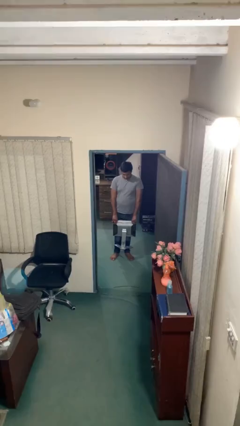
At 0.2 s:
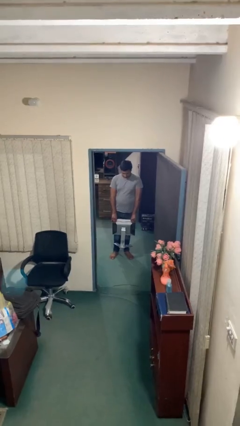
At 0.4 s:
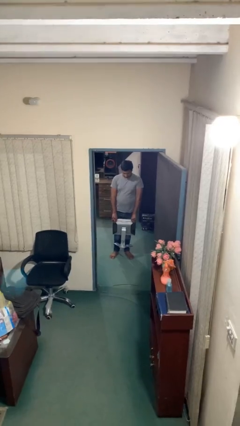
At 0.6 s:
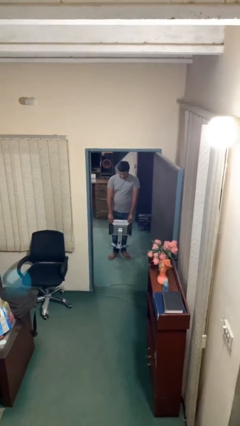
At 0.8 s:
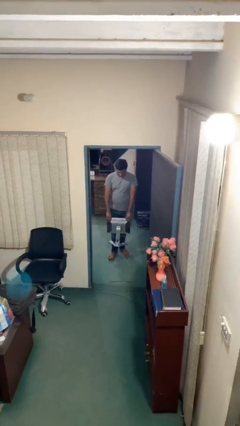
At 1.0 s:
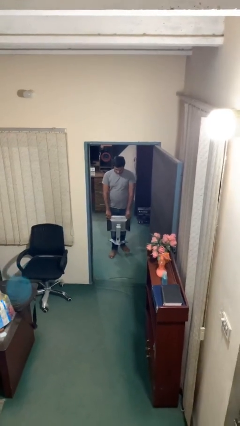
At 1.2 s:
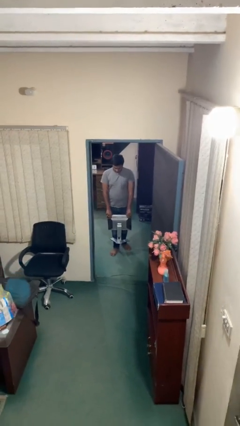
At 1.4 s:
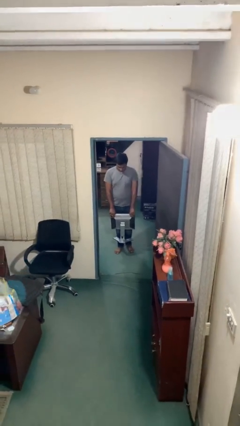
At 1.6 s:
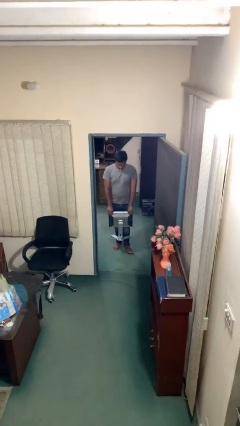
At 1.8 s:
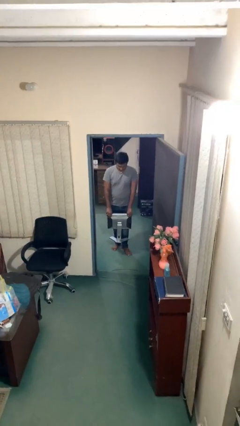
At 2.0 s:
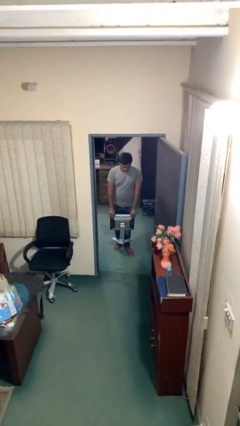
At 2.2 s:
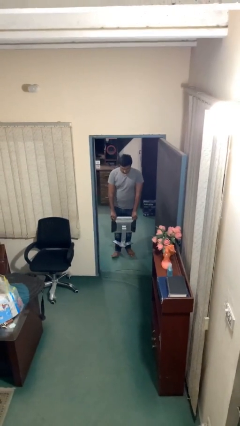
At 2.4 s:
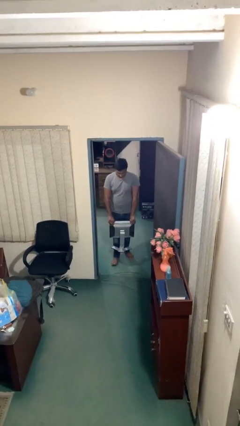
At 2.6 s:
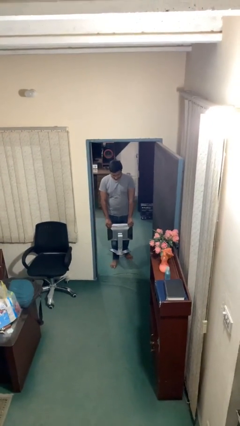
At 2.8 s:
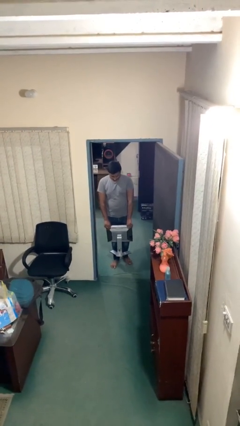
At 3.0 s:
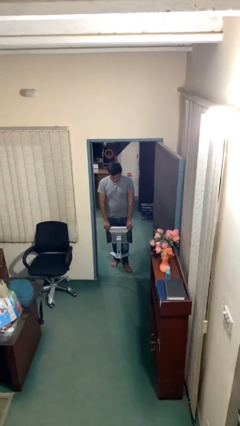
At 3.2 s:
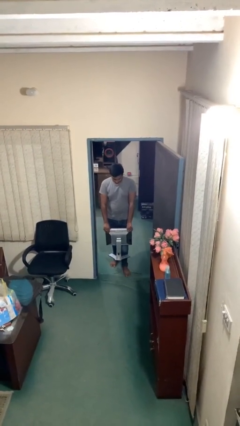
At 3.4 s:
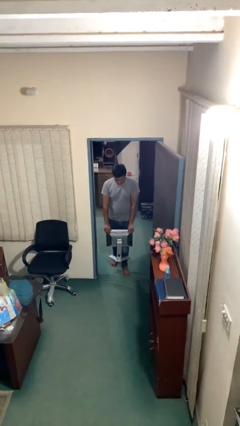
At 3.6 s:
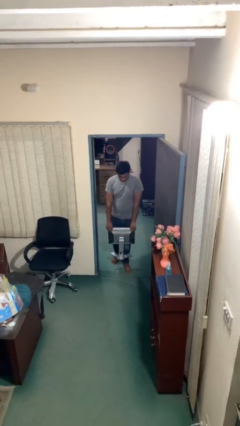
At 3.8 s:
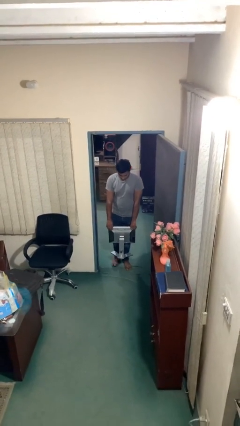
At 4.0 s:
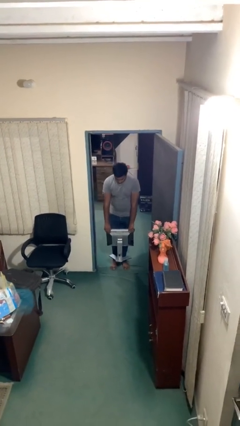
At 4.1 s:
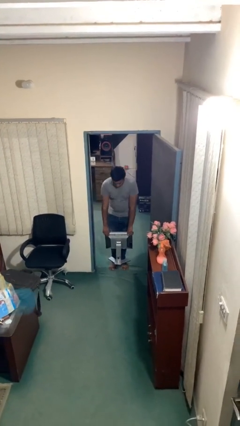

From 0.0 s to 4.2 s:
person carries heavy object

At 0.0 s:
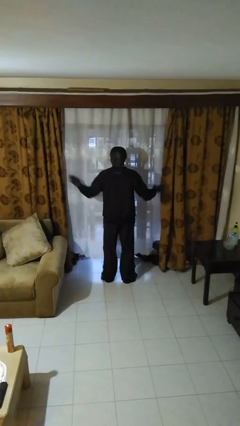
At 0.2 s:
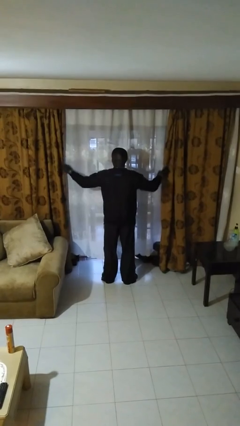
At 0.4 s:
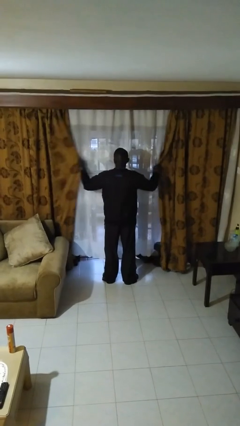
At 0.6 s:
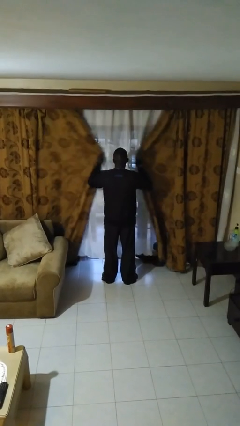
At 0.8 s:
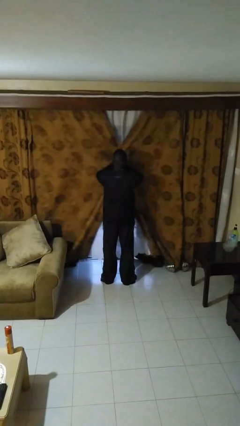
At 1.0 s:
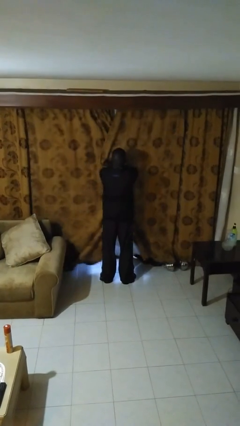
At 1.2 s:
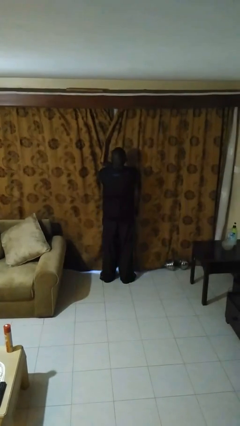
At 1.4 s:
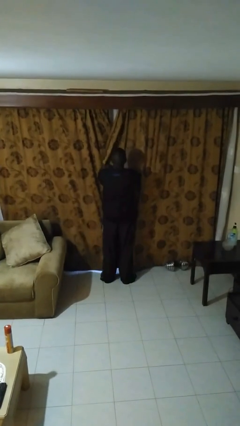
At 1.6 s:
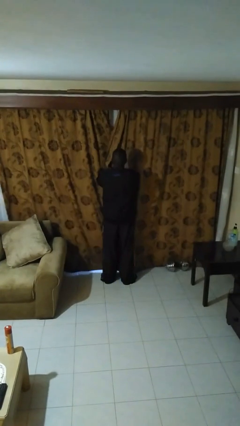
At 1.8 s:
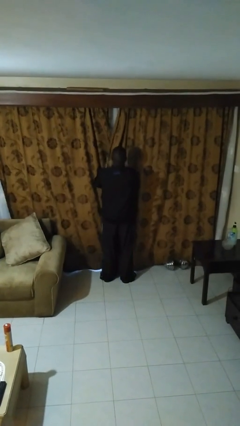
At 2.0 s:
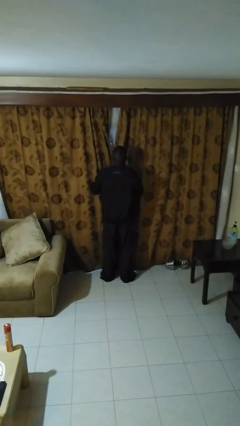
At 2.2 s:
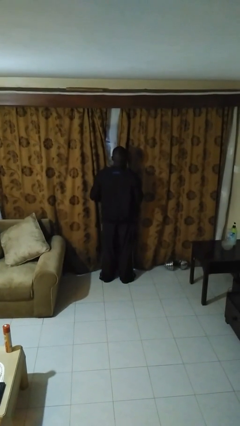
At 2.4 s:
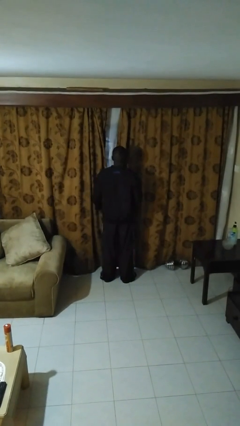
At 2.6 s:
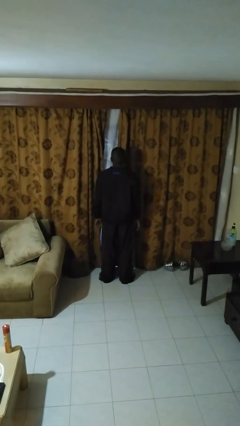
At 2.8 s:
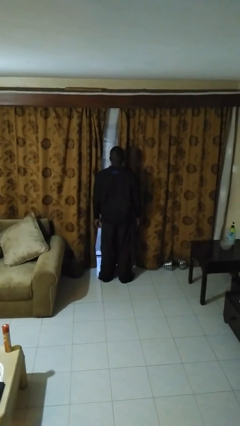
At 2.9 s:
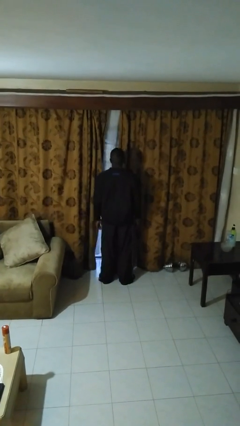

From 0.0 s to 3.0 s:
person closes curtains

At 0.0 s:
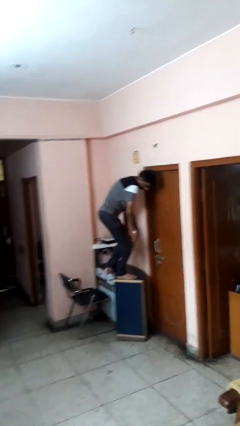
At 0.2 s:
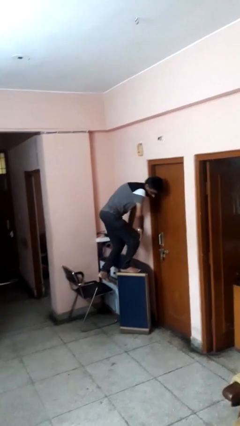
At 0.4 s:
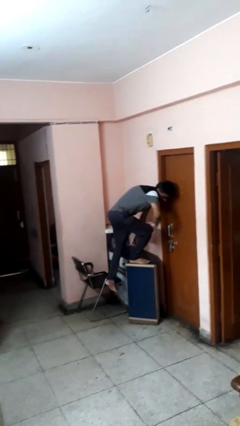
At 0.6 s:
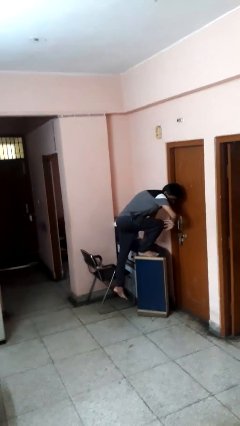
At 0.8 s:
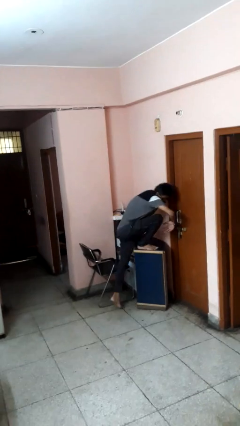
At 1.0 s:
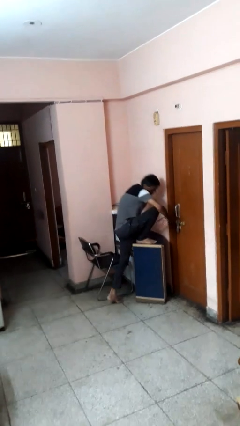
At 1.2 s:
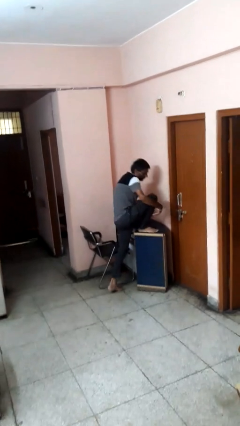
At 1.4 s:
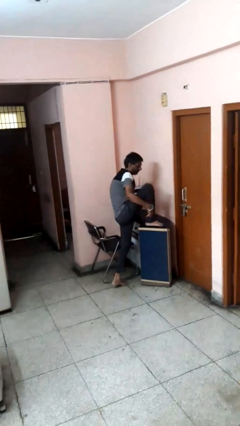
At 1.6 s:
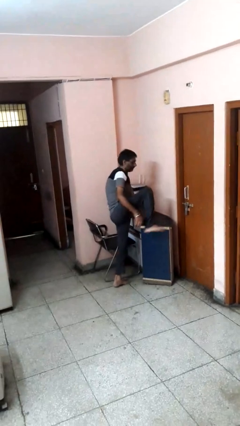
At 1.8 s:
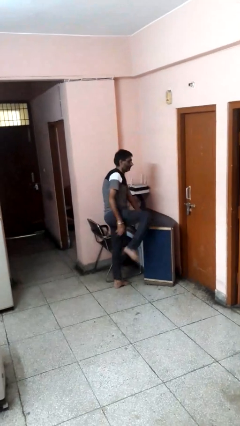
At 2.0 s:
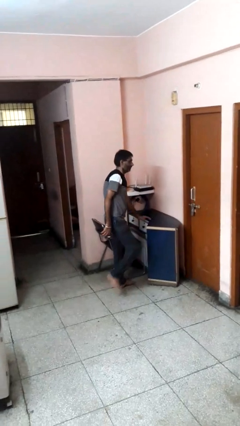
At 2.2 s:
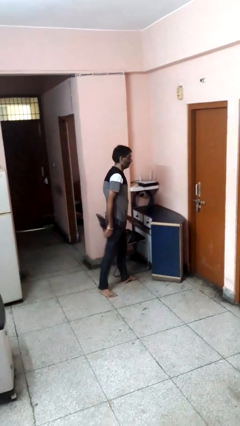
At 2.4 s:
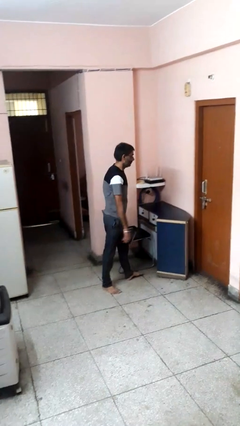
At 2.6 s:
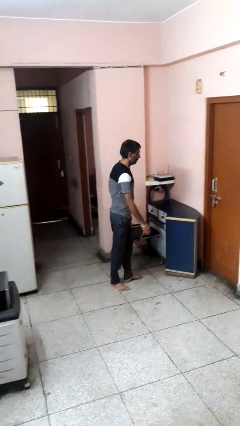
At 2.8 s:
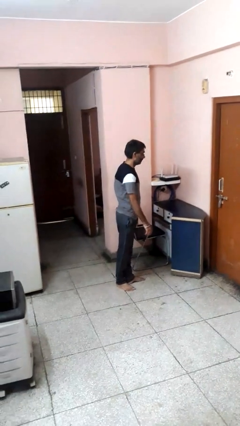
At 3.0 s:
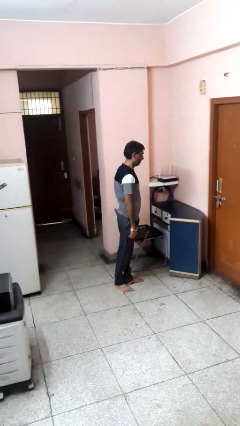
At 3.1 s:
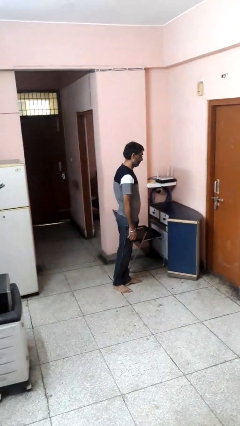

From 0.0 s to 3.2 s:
person climbs off table

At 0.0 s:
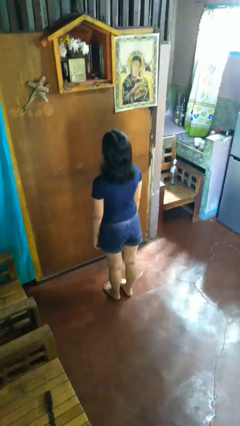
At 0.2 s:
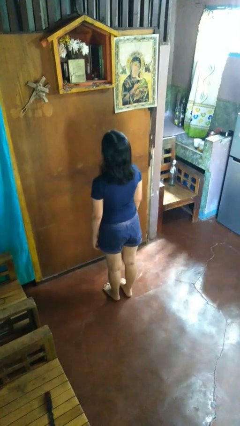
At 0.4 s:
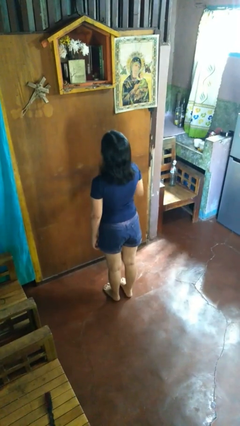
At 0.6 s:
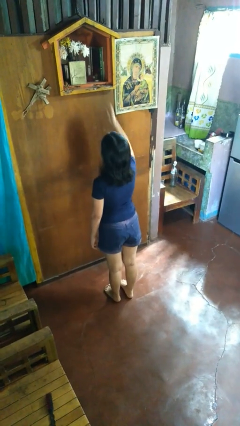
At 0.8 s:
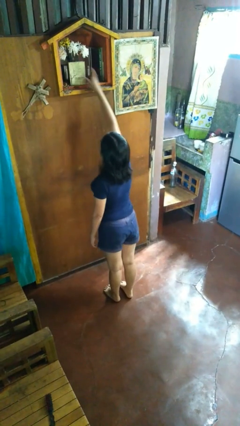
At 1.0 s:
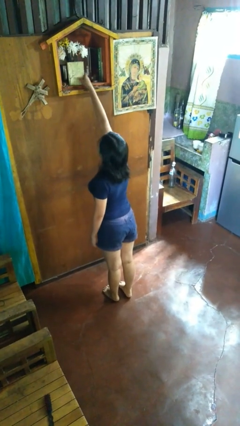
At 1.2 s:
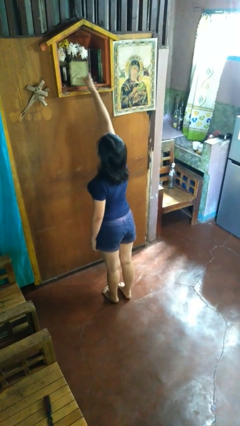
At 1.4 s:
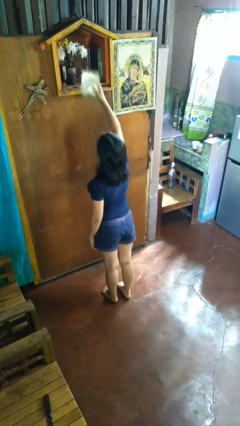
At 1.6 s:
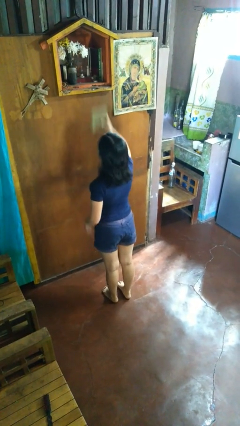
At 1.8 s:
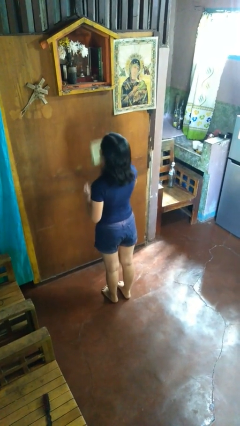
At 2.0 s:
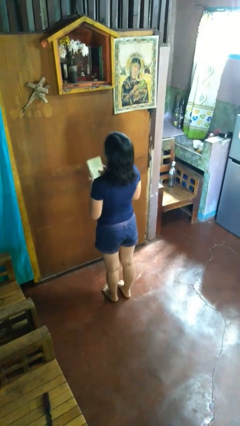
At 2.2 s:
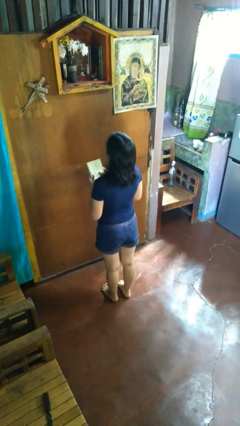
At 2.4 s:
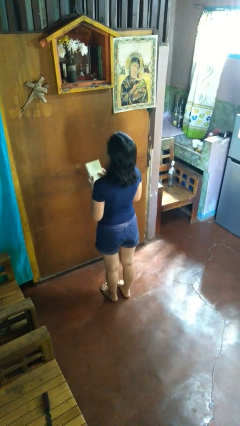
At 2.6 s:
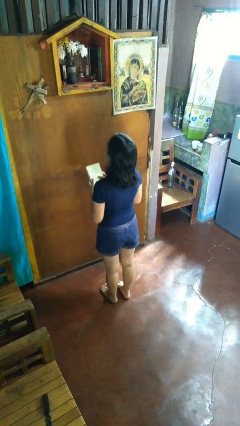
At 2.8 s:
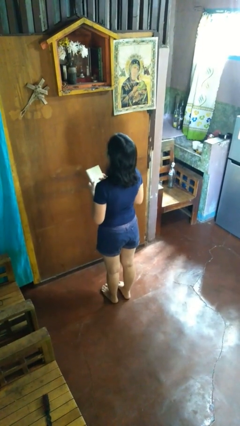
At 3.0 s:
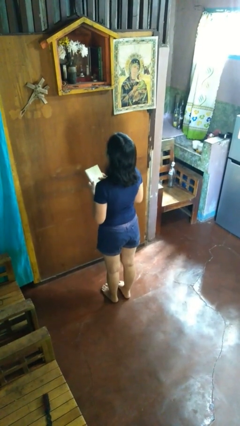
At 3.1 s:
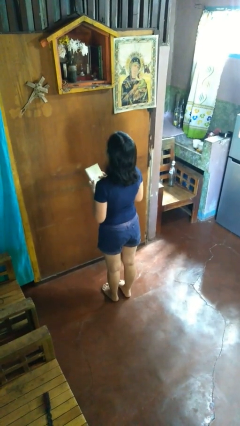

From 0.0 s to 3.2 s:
person picks up object from shelf

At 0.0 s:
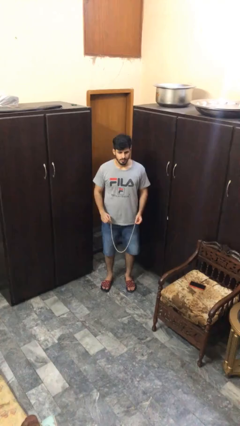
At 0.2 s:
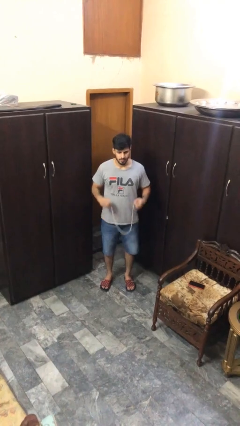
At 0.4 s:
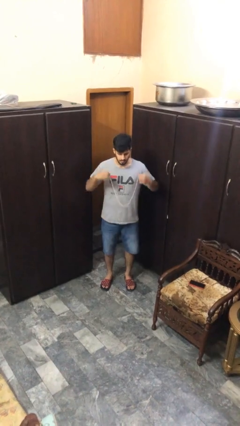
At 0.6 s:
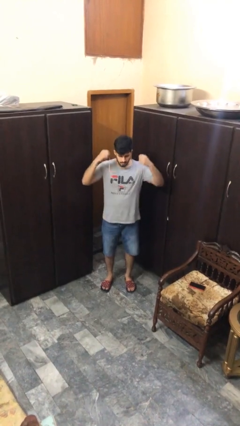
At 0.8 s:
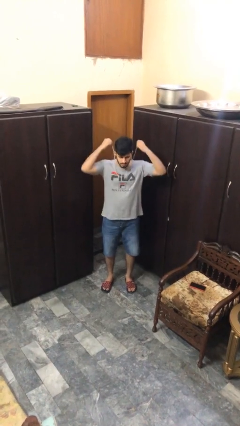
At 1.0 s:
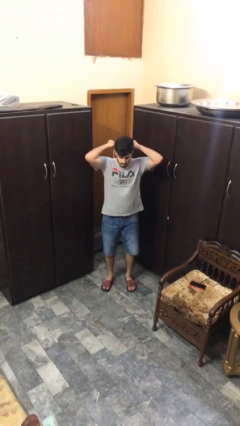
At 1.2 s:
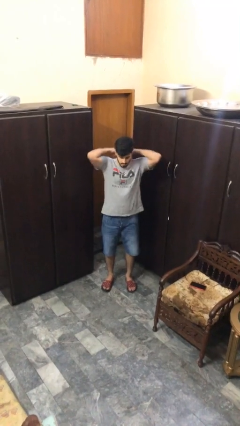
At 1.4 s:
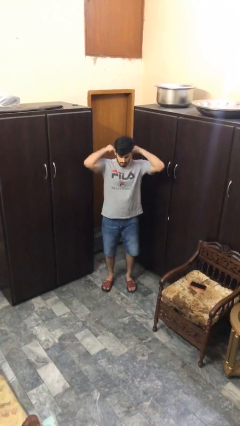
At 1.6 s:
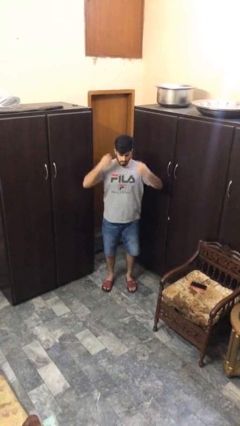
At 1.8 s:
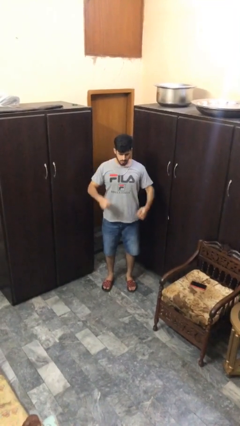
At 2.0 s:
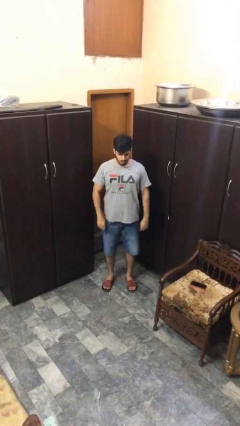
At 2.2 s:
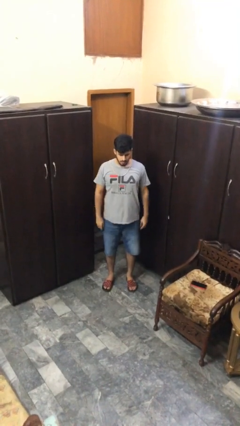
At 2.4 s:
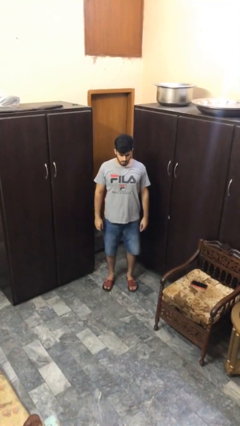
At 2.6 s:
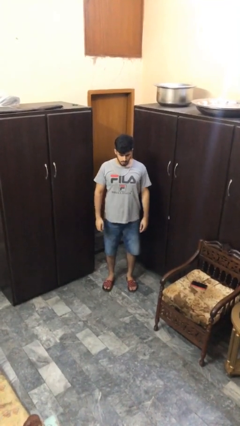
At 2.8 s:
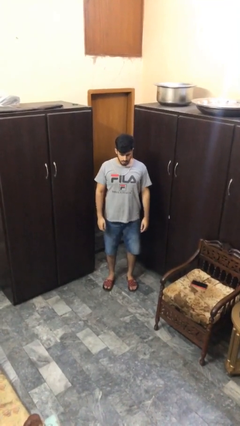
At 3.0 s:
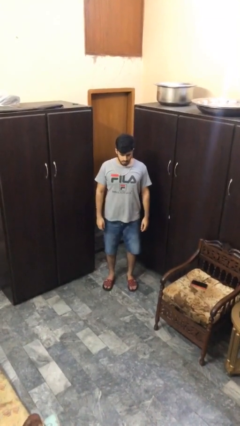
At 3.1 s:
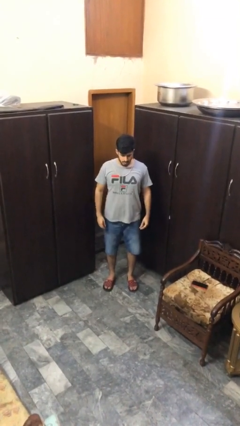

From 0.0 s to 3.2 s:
person puts on necklace
